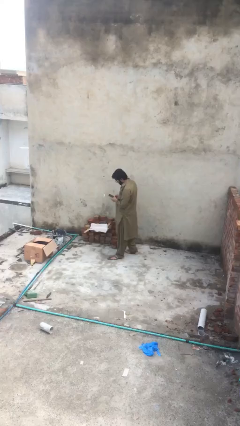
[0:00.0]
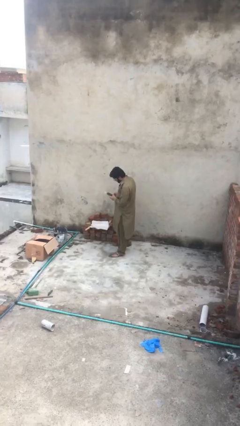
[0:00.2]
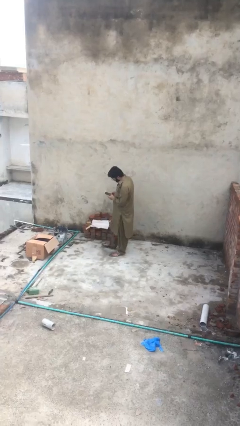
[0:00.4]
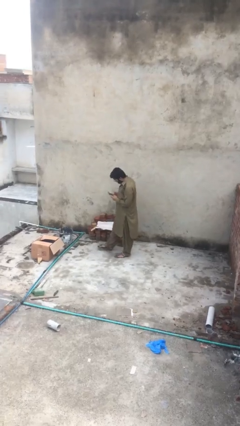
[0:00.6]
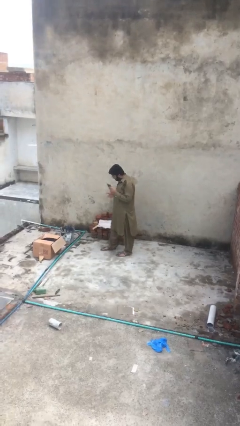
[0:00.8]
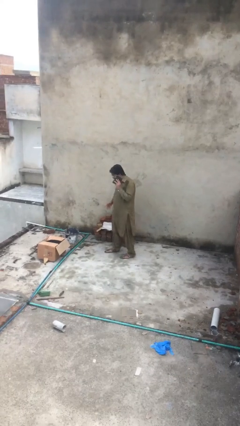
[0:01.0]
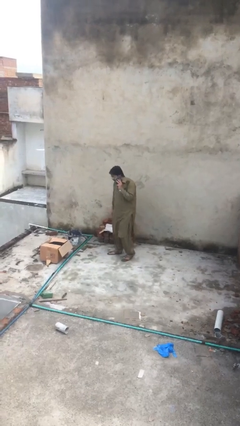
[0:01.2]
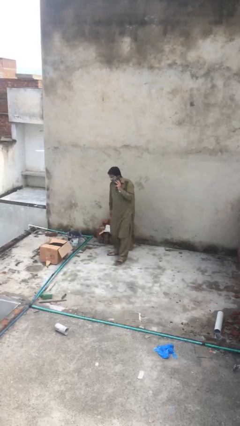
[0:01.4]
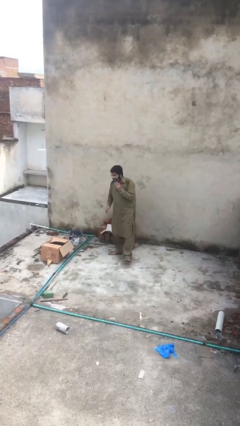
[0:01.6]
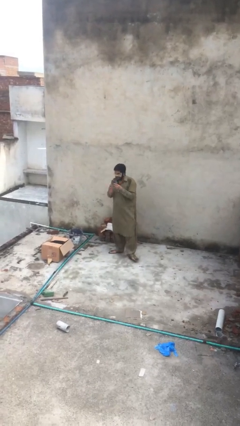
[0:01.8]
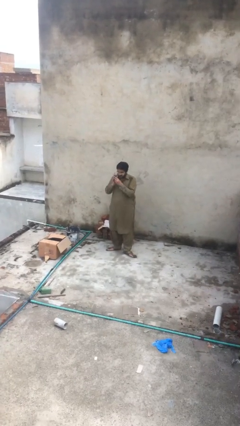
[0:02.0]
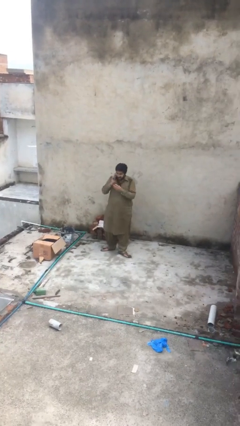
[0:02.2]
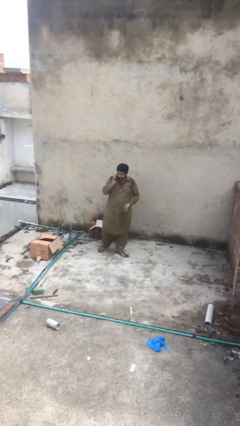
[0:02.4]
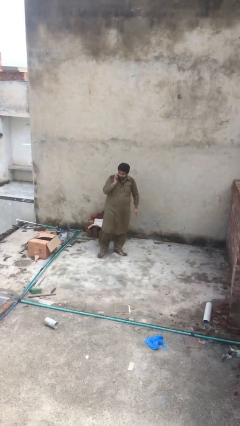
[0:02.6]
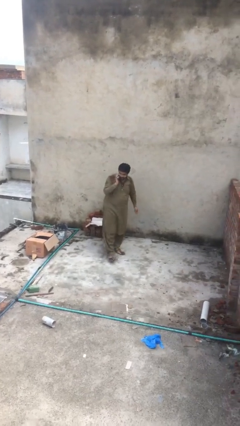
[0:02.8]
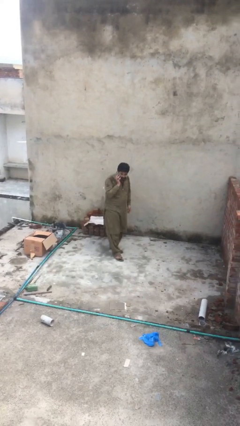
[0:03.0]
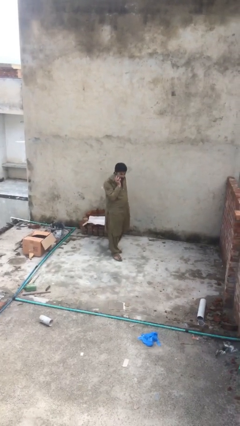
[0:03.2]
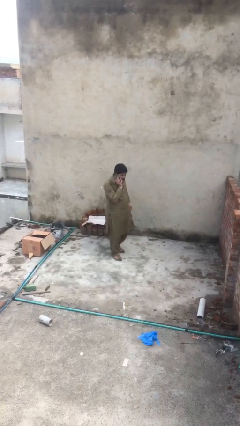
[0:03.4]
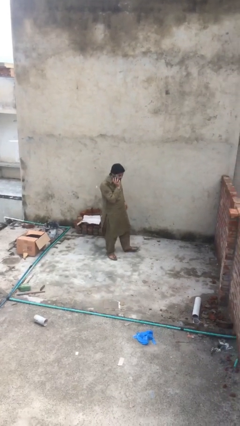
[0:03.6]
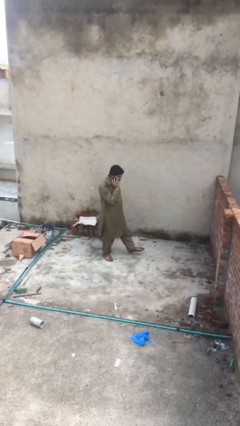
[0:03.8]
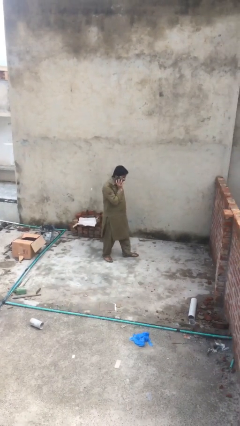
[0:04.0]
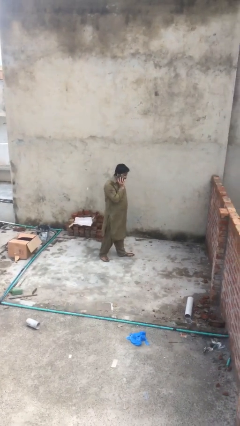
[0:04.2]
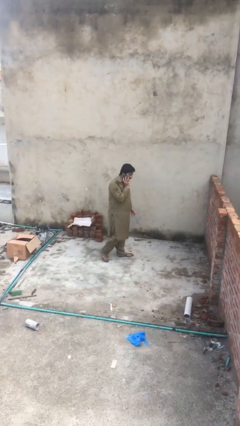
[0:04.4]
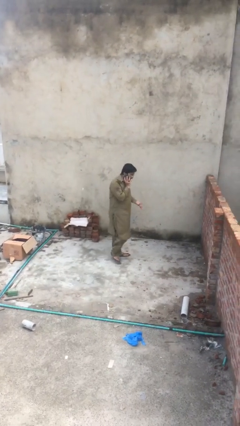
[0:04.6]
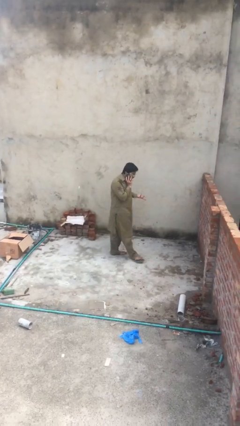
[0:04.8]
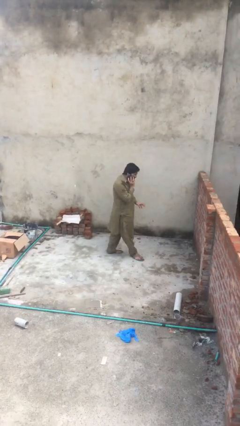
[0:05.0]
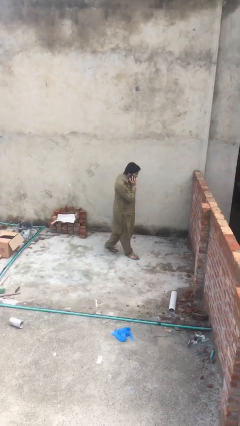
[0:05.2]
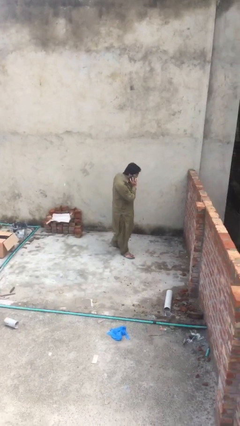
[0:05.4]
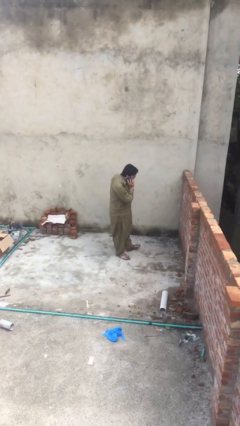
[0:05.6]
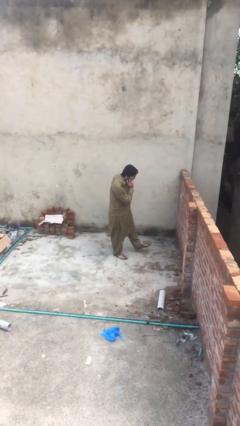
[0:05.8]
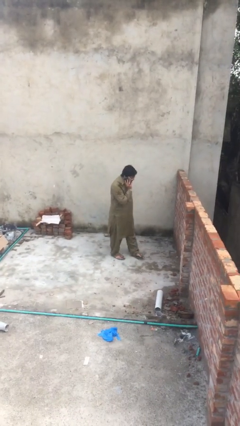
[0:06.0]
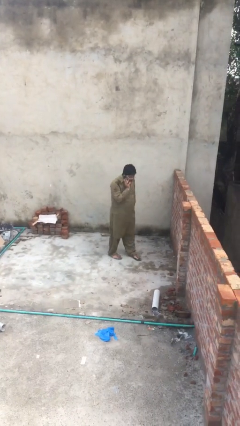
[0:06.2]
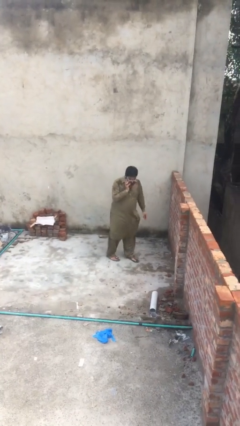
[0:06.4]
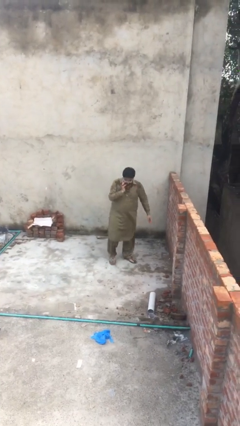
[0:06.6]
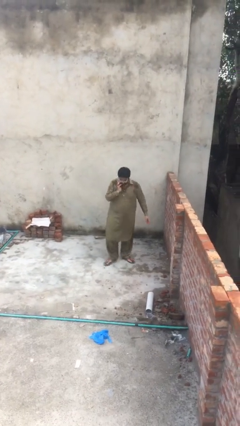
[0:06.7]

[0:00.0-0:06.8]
person talks on phone

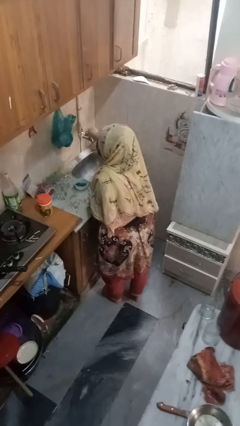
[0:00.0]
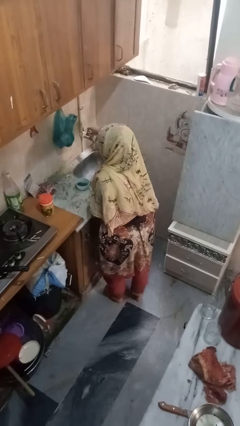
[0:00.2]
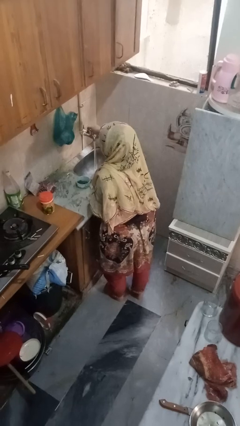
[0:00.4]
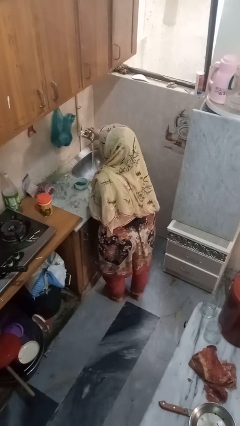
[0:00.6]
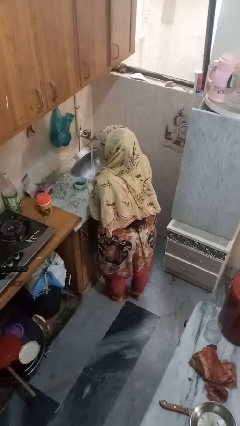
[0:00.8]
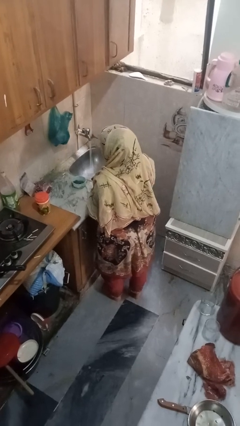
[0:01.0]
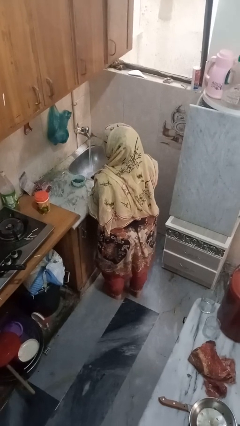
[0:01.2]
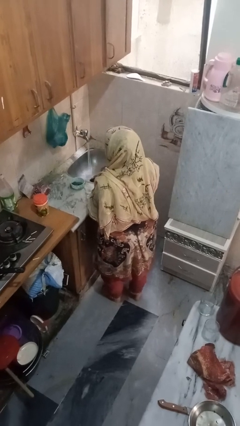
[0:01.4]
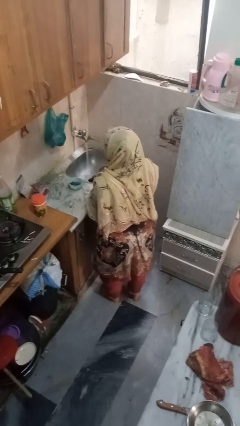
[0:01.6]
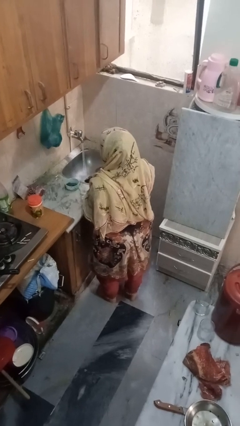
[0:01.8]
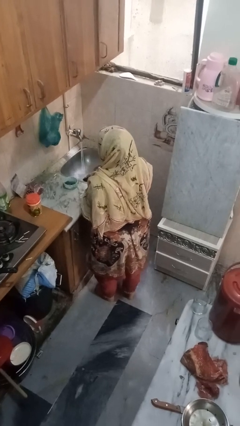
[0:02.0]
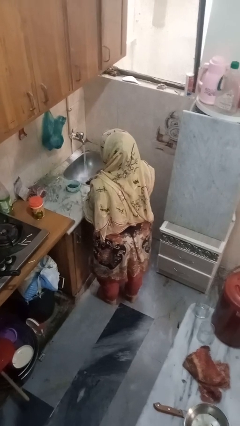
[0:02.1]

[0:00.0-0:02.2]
person turns on faucet

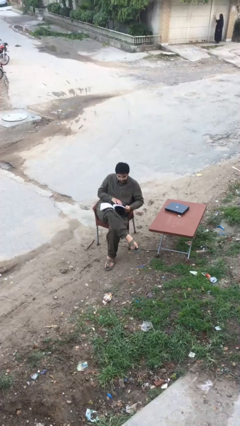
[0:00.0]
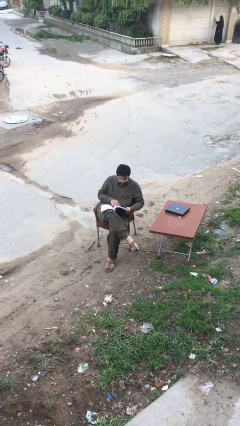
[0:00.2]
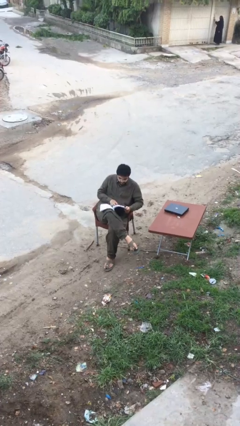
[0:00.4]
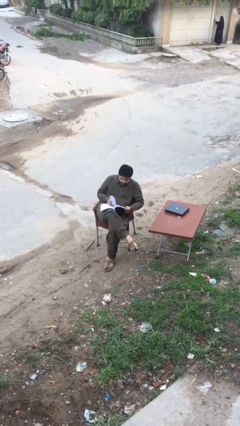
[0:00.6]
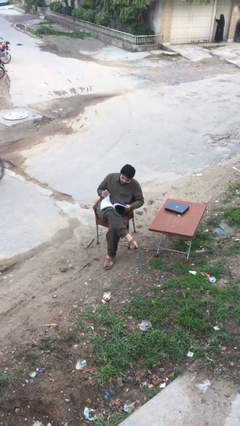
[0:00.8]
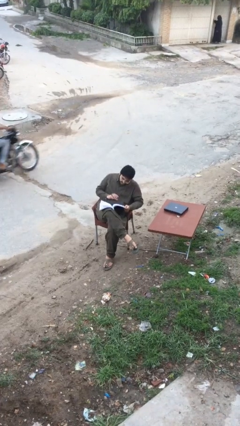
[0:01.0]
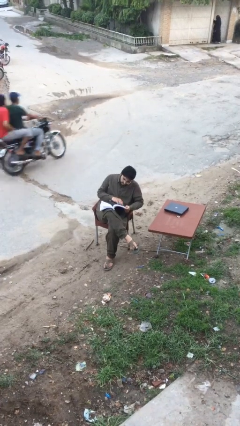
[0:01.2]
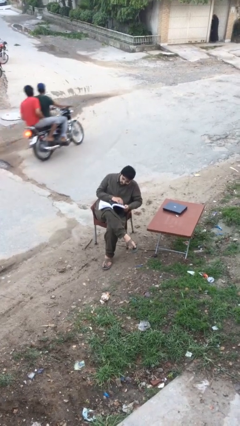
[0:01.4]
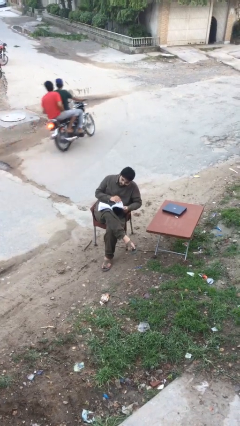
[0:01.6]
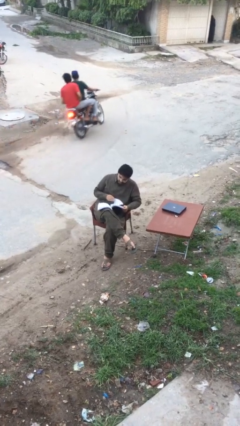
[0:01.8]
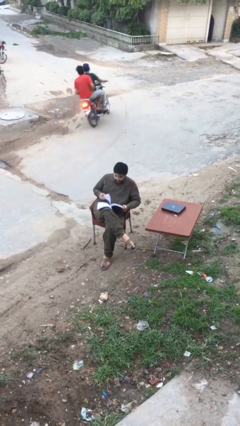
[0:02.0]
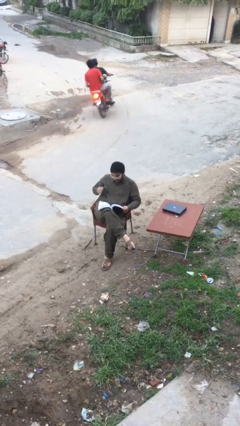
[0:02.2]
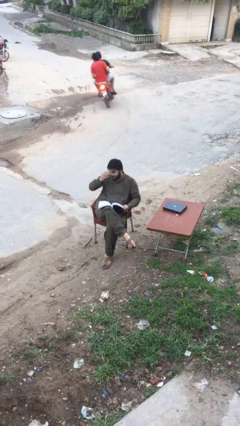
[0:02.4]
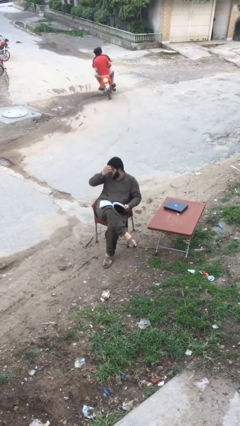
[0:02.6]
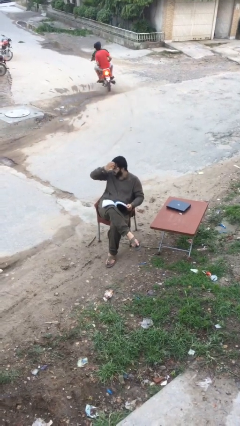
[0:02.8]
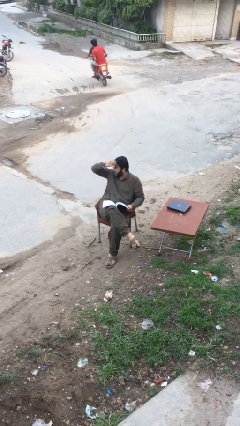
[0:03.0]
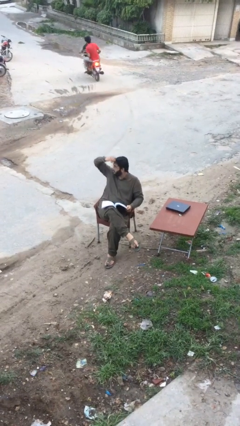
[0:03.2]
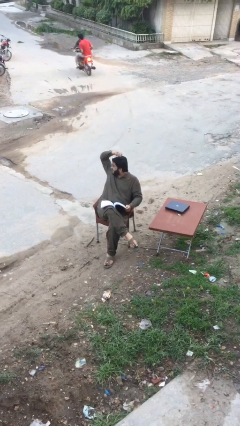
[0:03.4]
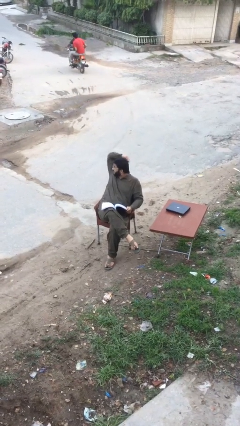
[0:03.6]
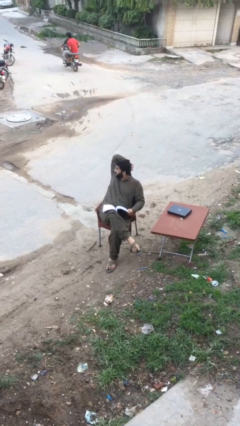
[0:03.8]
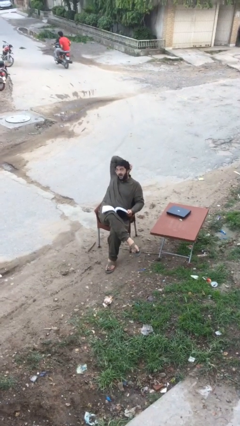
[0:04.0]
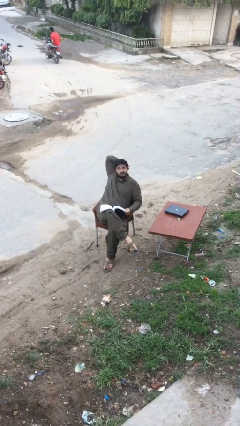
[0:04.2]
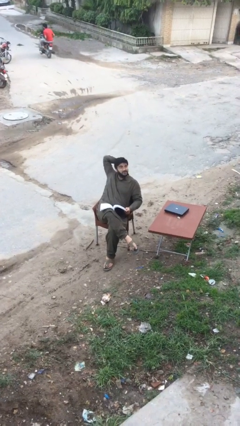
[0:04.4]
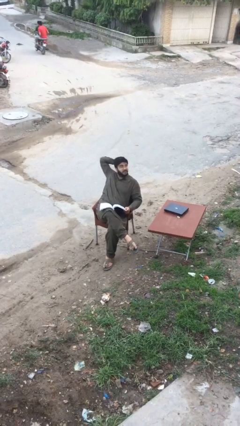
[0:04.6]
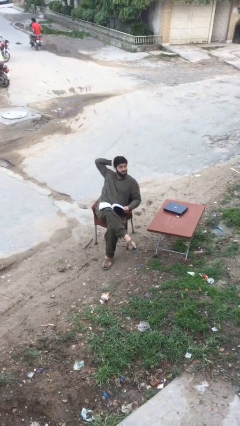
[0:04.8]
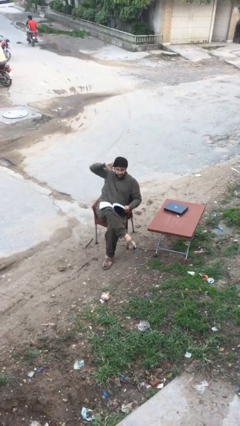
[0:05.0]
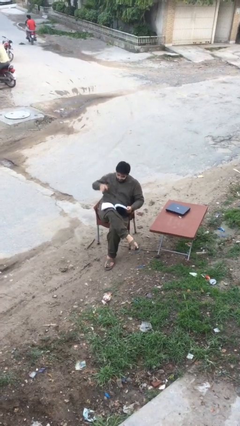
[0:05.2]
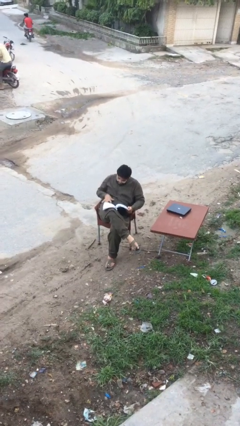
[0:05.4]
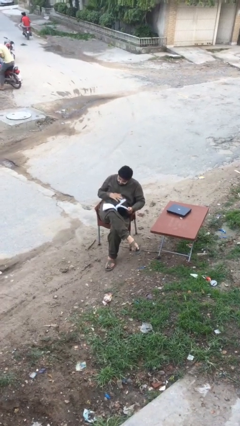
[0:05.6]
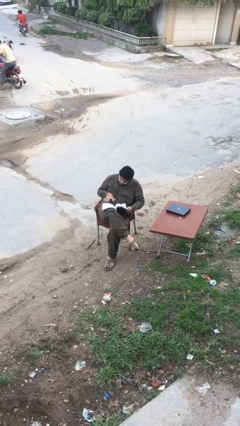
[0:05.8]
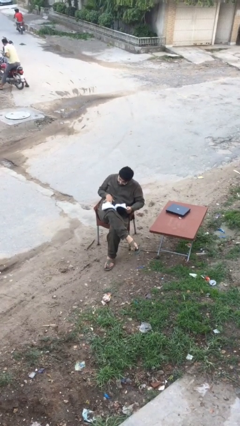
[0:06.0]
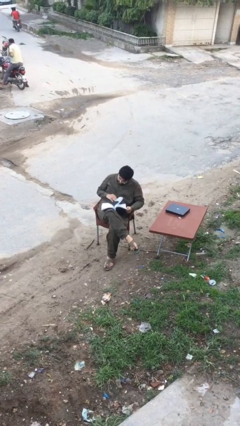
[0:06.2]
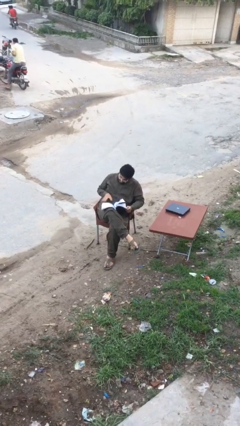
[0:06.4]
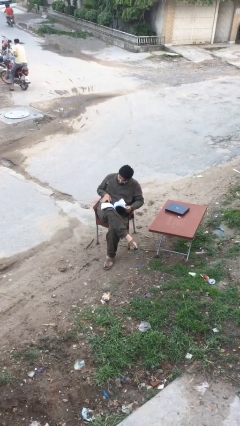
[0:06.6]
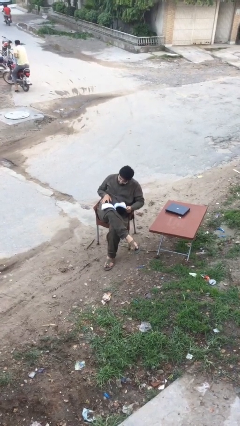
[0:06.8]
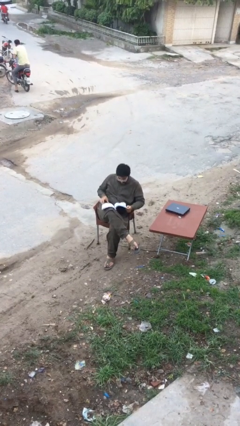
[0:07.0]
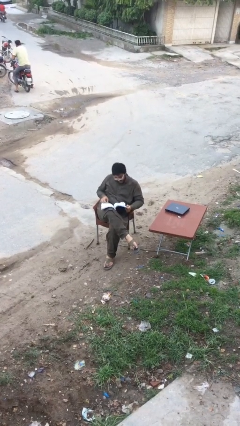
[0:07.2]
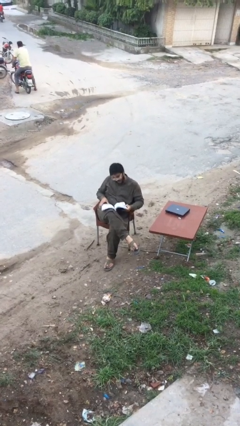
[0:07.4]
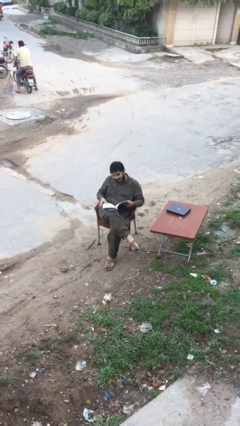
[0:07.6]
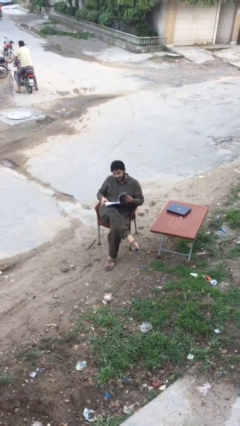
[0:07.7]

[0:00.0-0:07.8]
person reads document

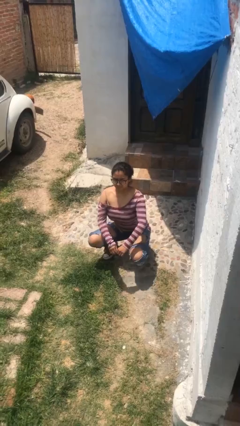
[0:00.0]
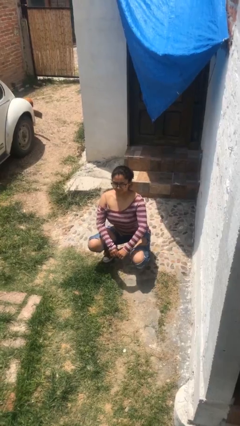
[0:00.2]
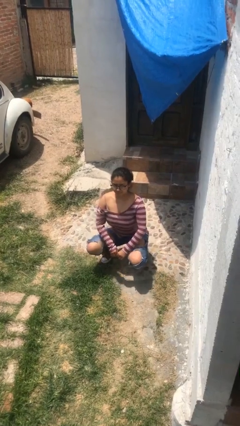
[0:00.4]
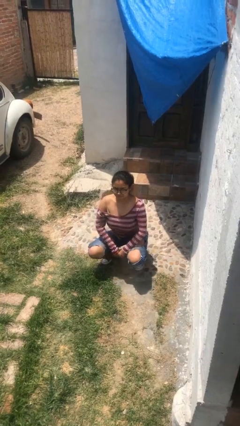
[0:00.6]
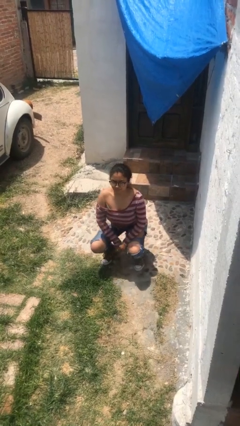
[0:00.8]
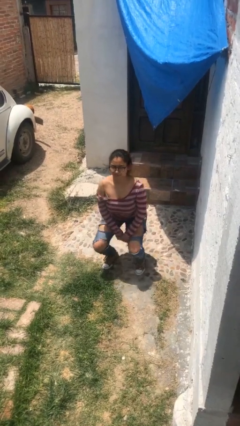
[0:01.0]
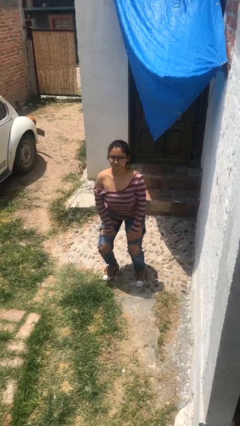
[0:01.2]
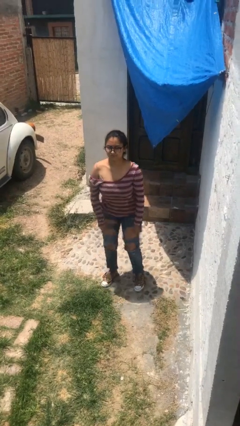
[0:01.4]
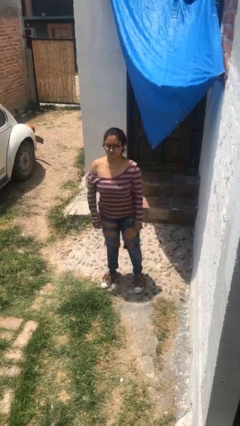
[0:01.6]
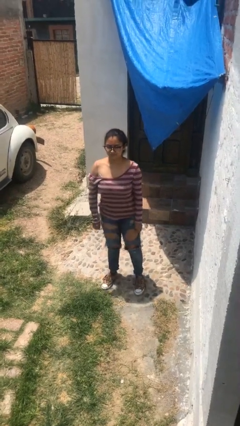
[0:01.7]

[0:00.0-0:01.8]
person stands up
